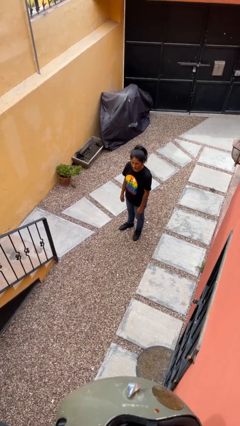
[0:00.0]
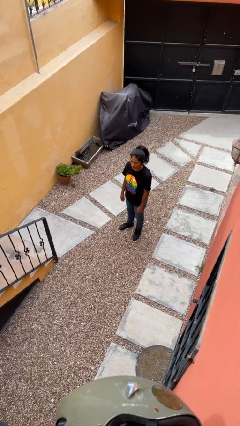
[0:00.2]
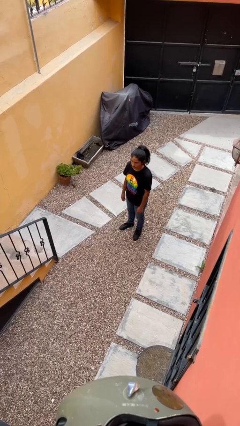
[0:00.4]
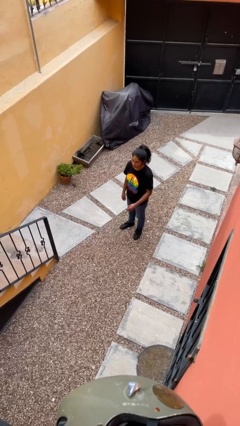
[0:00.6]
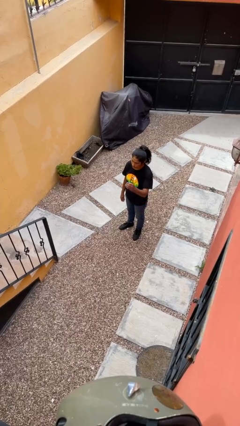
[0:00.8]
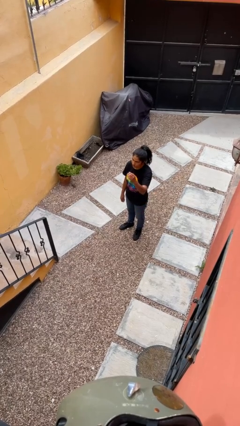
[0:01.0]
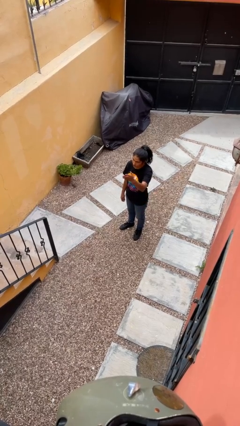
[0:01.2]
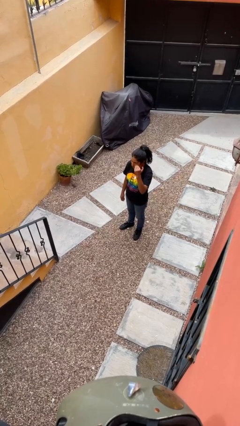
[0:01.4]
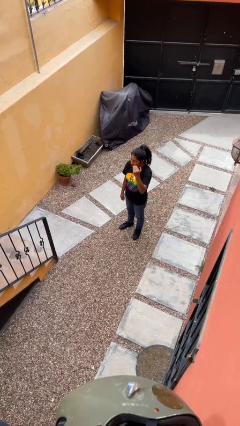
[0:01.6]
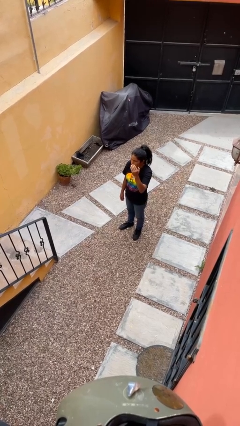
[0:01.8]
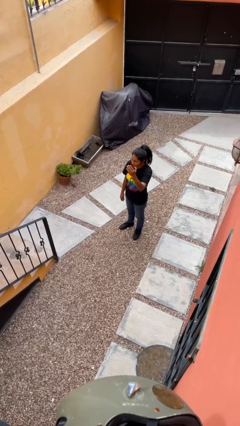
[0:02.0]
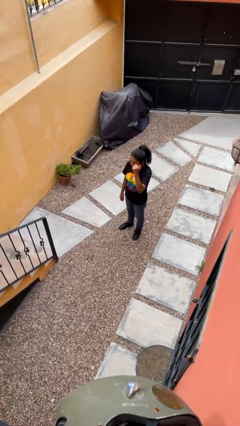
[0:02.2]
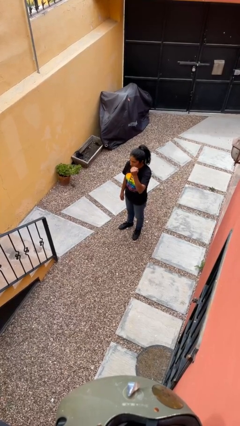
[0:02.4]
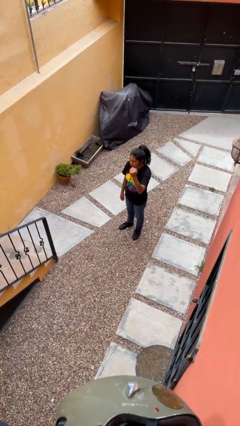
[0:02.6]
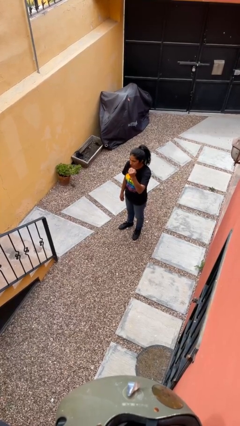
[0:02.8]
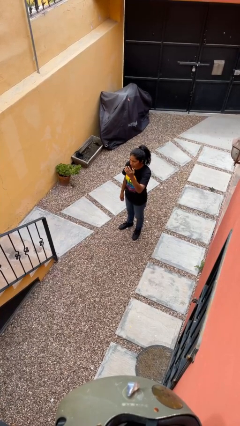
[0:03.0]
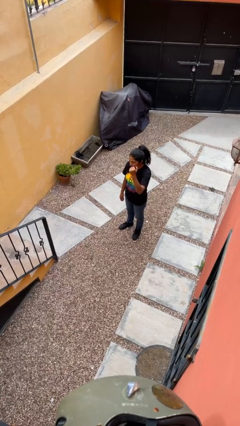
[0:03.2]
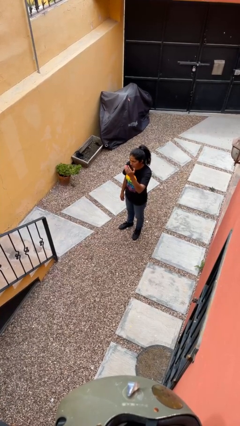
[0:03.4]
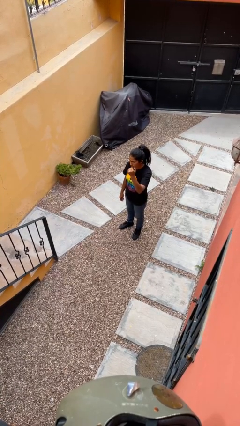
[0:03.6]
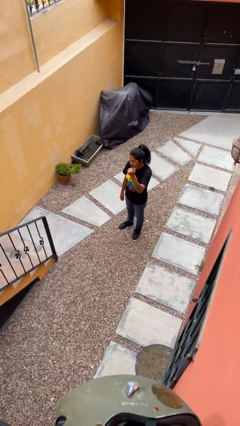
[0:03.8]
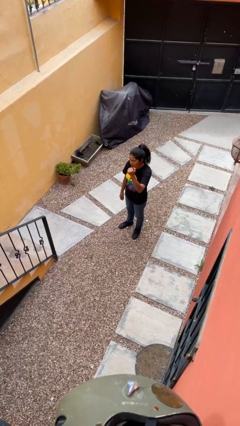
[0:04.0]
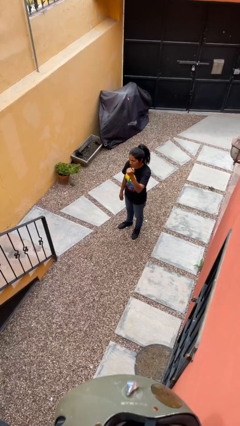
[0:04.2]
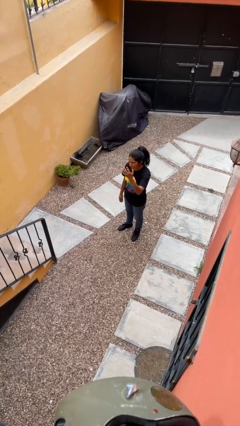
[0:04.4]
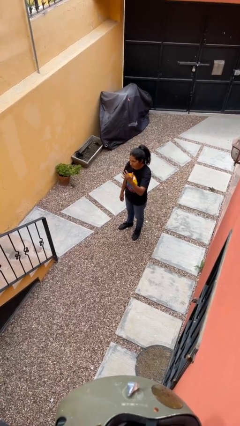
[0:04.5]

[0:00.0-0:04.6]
person gestures come here

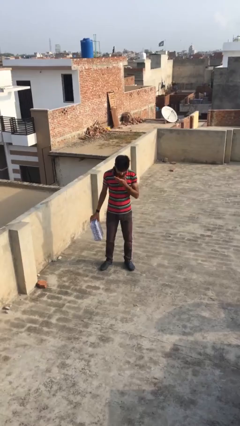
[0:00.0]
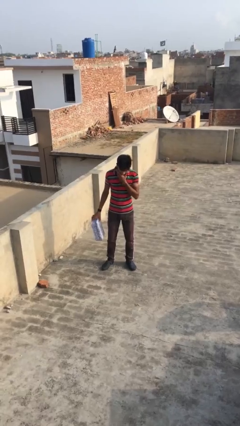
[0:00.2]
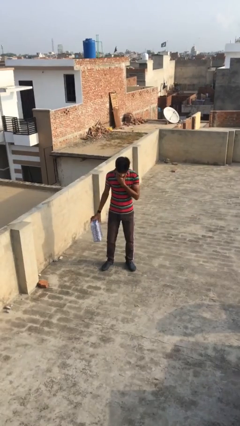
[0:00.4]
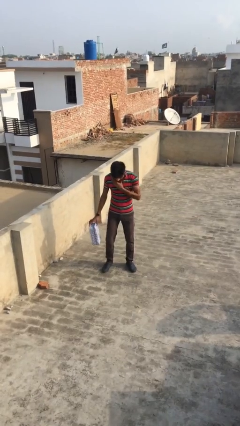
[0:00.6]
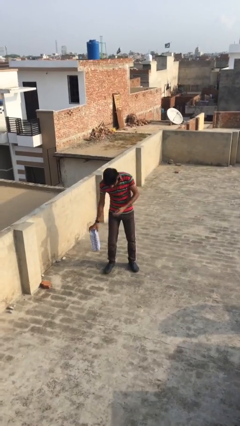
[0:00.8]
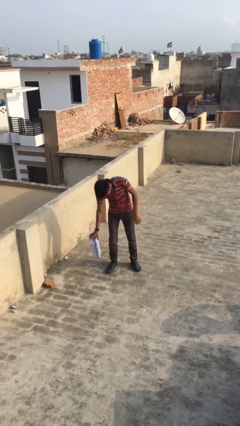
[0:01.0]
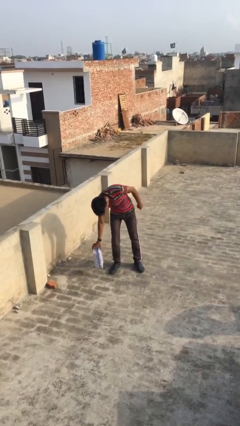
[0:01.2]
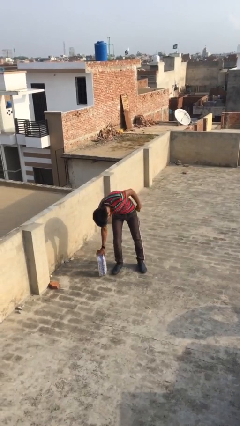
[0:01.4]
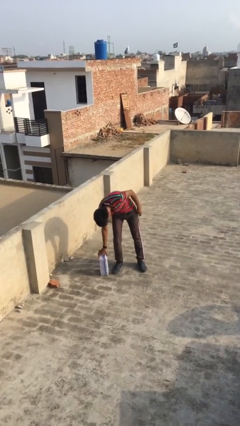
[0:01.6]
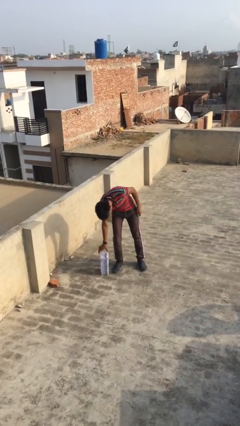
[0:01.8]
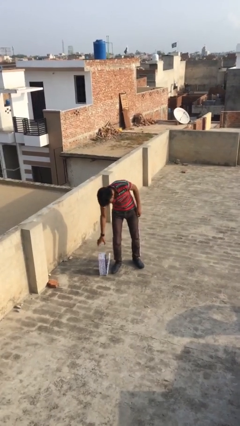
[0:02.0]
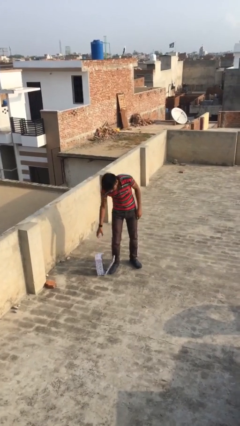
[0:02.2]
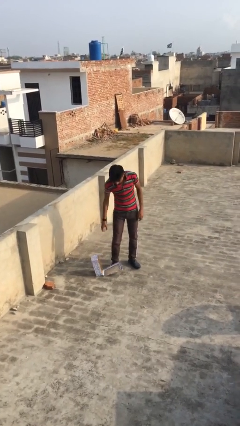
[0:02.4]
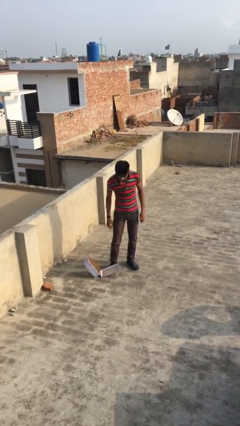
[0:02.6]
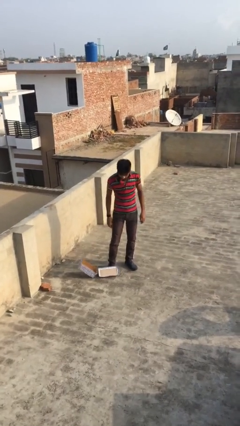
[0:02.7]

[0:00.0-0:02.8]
person puts down object on floor

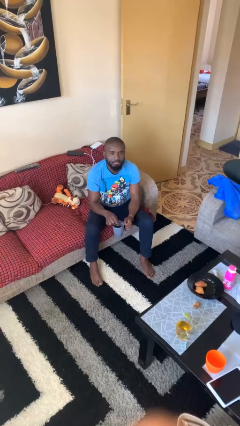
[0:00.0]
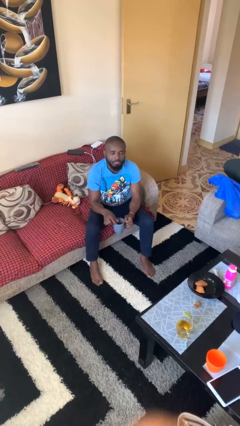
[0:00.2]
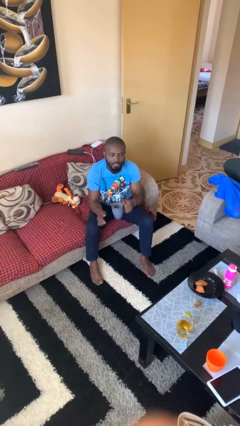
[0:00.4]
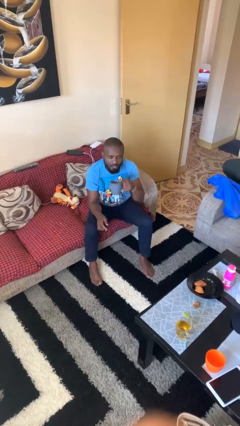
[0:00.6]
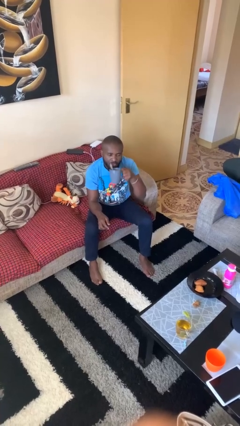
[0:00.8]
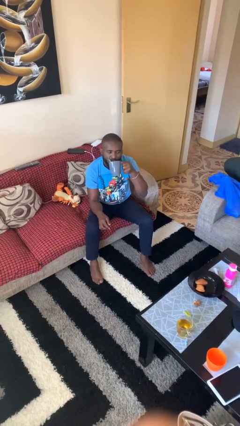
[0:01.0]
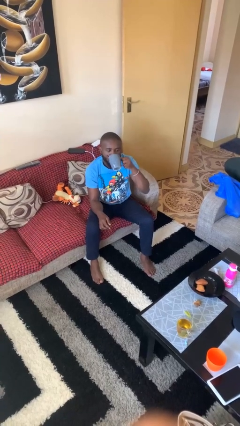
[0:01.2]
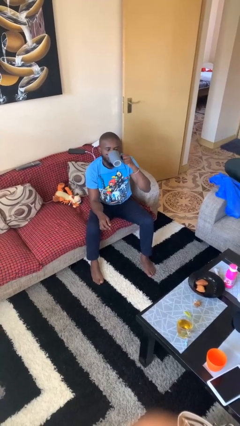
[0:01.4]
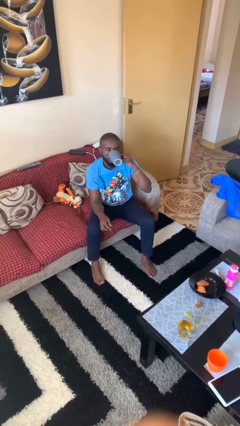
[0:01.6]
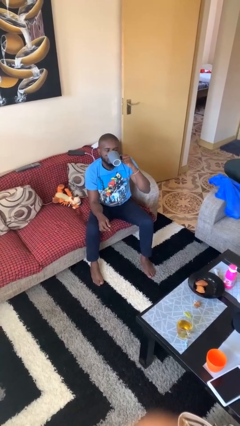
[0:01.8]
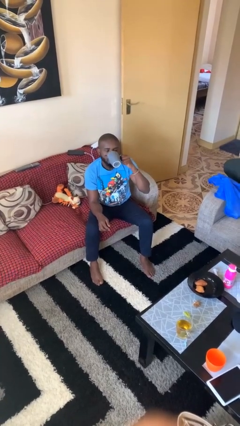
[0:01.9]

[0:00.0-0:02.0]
person drinks from mug

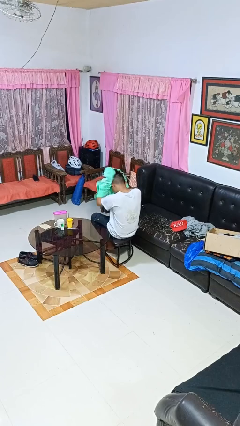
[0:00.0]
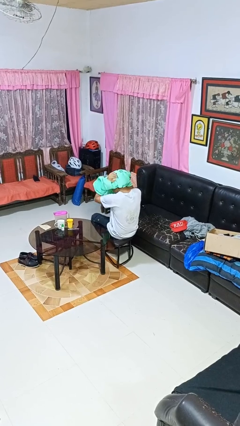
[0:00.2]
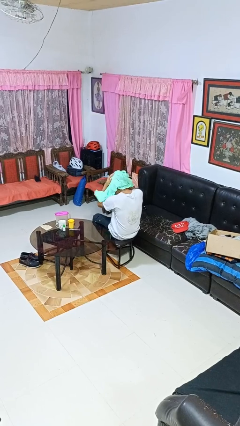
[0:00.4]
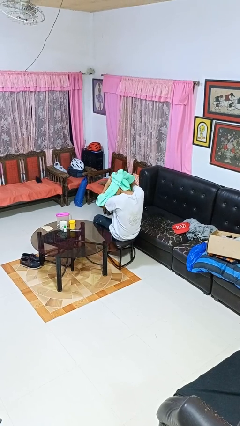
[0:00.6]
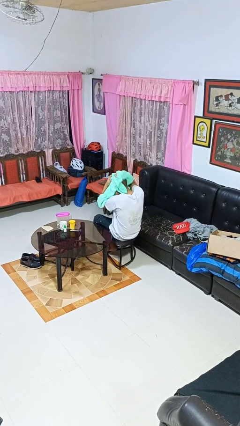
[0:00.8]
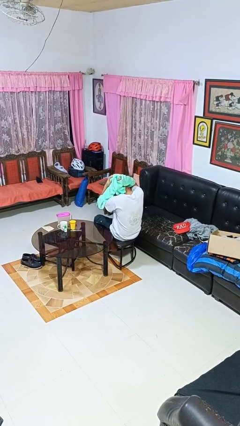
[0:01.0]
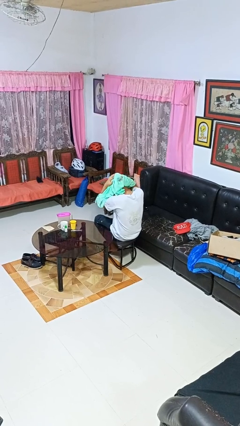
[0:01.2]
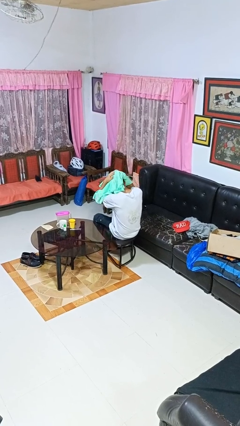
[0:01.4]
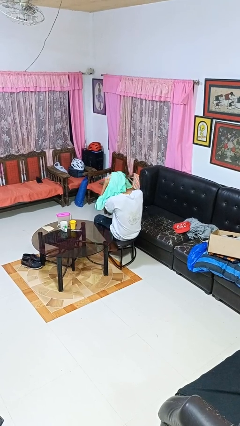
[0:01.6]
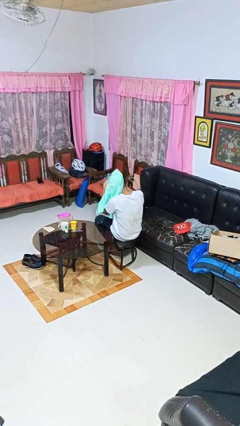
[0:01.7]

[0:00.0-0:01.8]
person dries hair with towel

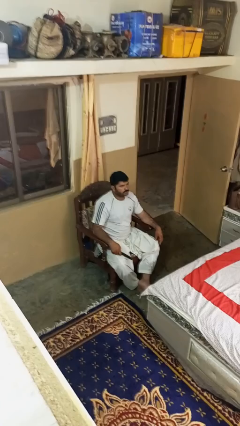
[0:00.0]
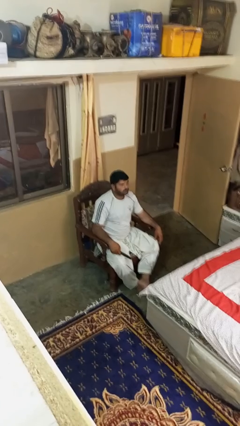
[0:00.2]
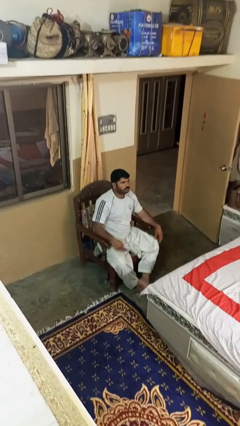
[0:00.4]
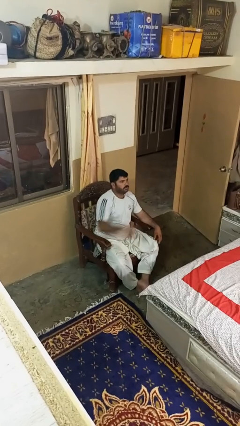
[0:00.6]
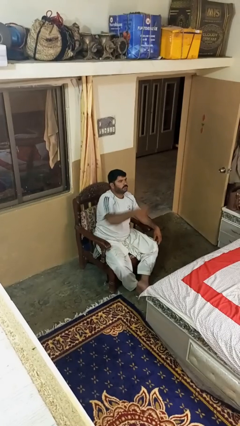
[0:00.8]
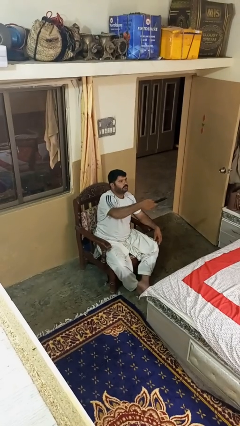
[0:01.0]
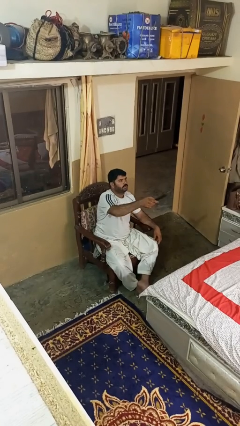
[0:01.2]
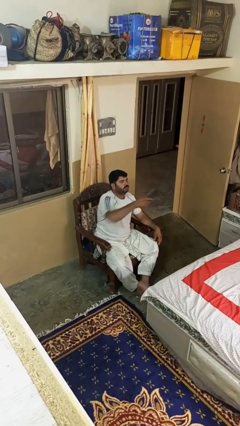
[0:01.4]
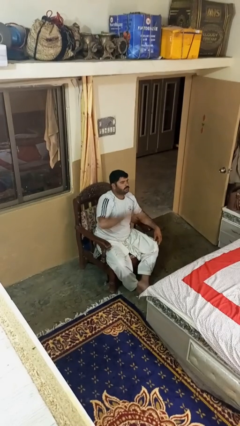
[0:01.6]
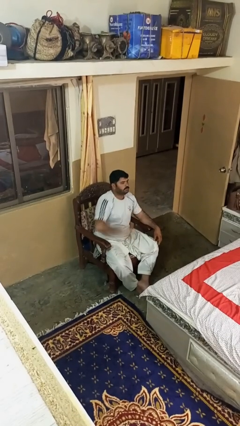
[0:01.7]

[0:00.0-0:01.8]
person uses television remote

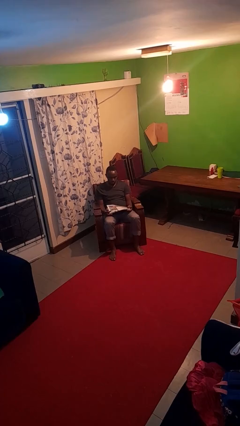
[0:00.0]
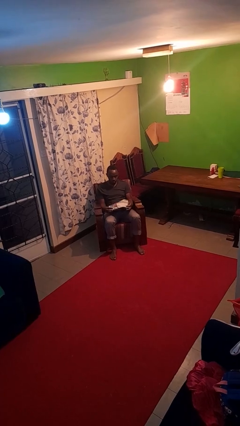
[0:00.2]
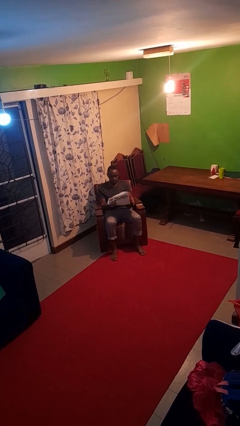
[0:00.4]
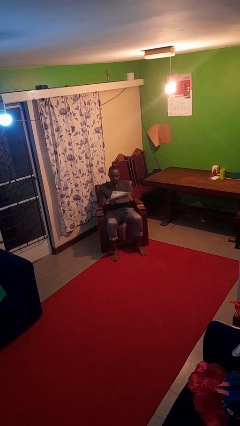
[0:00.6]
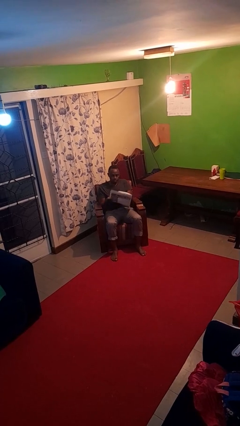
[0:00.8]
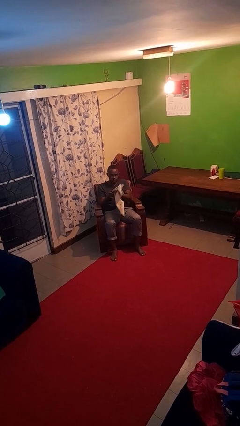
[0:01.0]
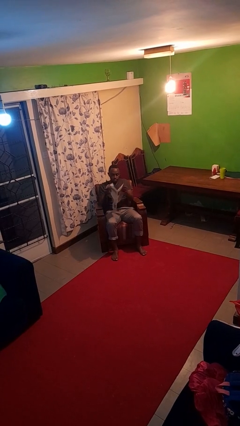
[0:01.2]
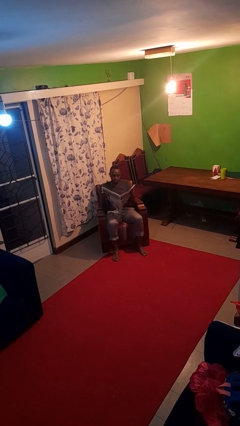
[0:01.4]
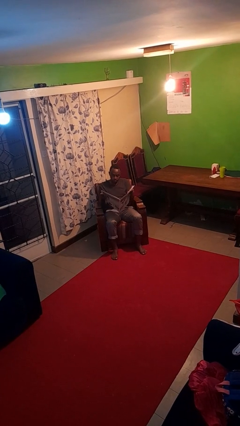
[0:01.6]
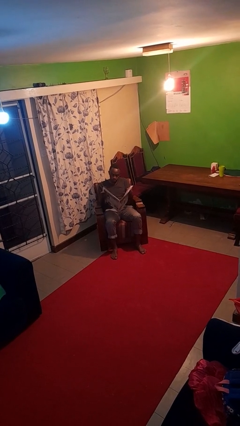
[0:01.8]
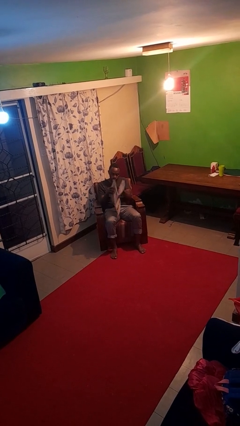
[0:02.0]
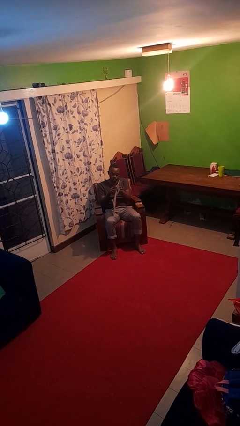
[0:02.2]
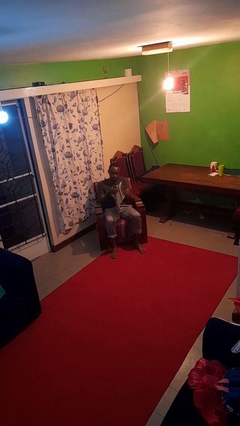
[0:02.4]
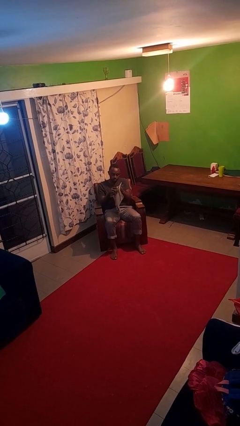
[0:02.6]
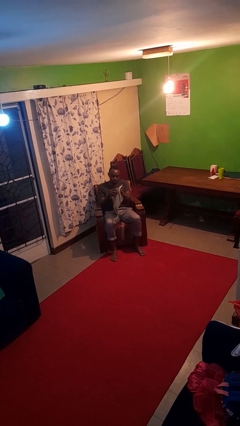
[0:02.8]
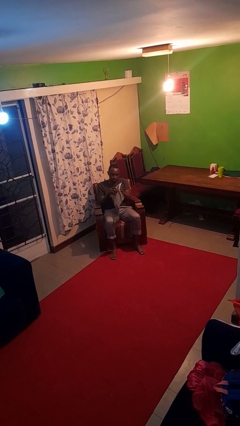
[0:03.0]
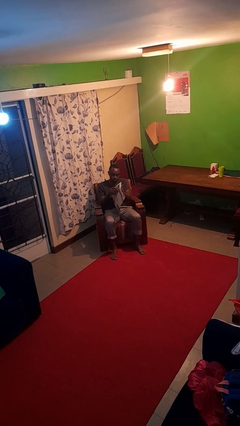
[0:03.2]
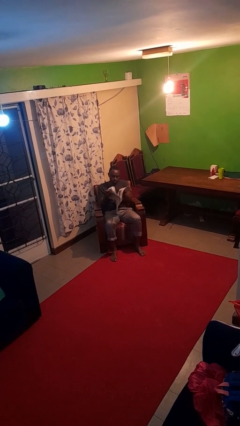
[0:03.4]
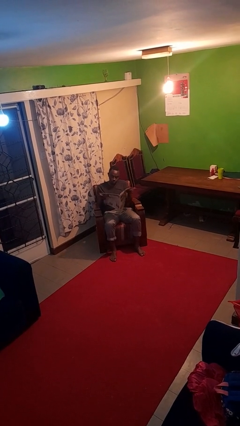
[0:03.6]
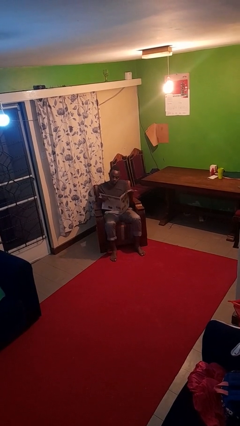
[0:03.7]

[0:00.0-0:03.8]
person reads newspaper

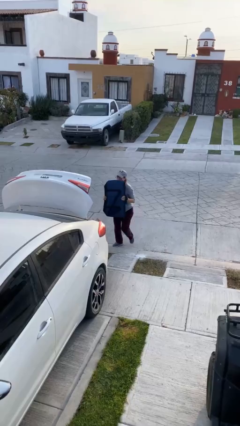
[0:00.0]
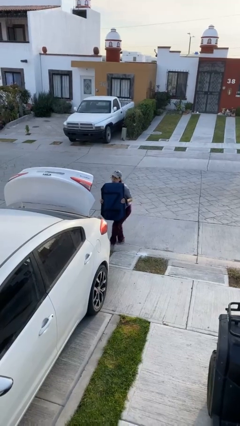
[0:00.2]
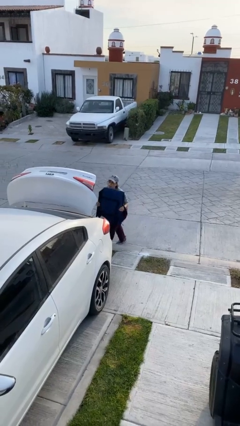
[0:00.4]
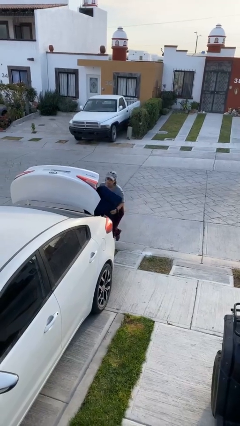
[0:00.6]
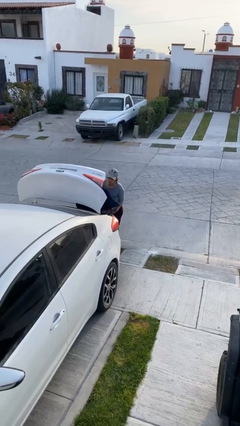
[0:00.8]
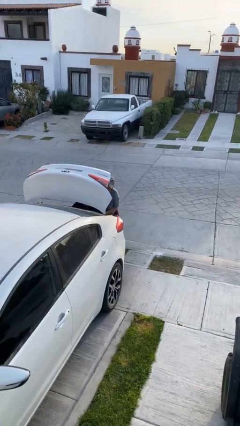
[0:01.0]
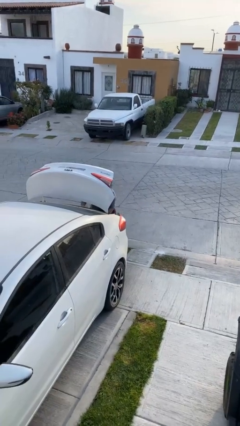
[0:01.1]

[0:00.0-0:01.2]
person loads car
